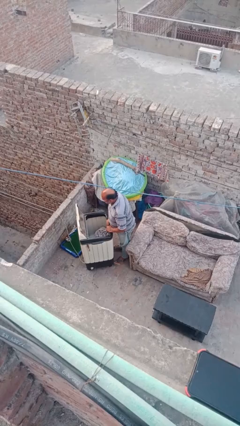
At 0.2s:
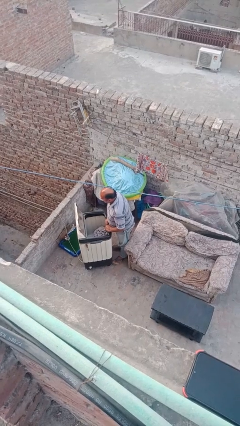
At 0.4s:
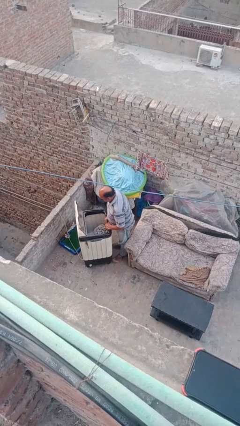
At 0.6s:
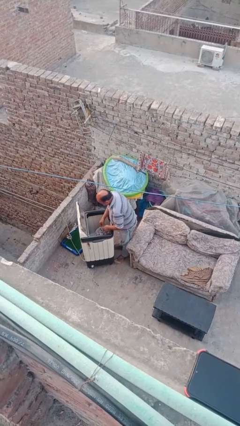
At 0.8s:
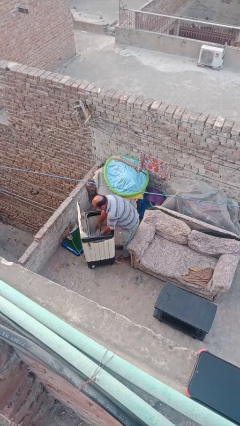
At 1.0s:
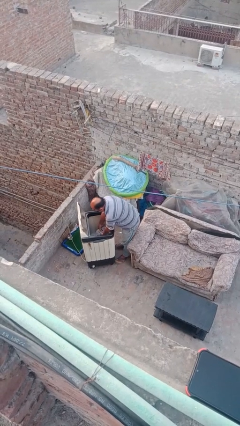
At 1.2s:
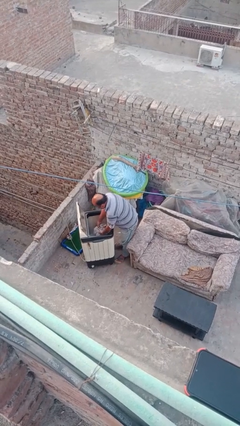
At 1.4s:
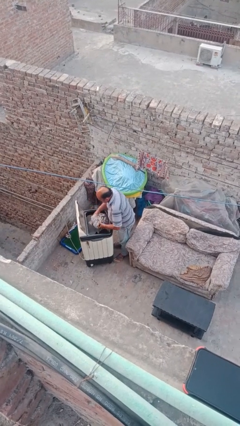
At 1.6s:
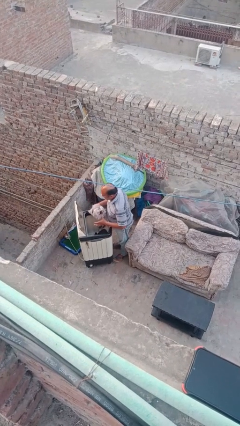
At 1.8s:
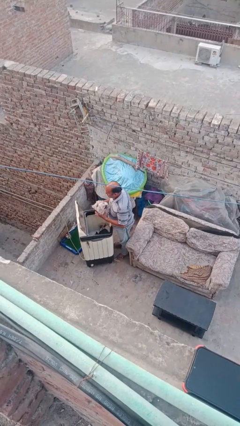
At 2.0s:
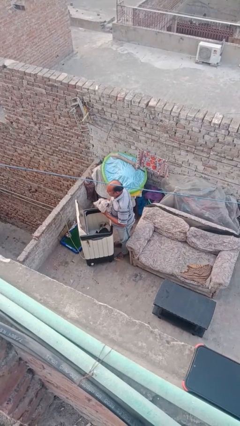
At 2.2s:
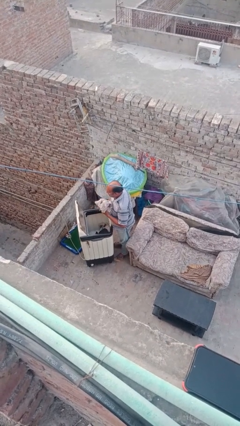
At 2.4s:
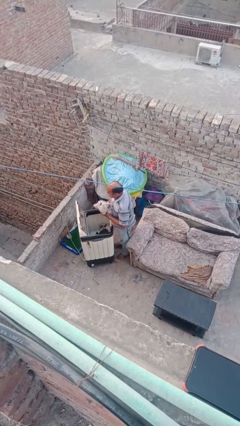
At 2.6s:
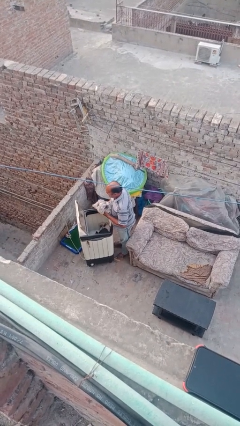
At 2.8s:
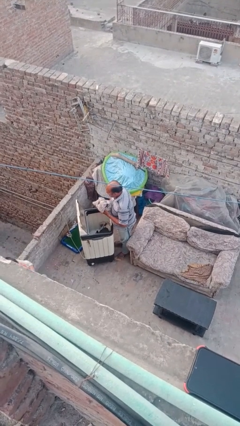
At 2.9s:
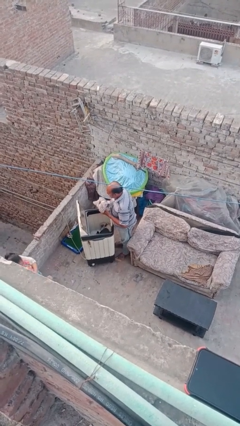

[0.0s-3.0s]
person unloads clotheswasher

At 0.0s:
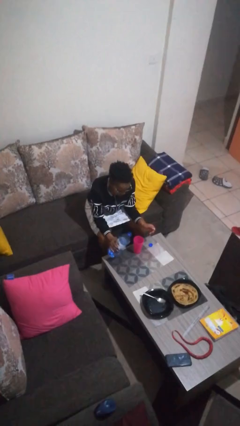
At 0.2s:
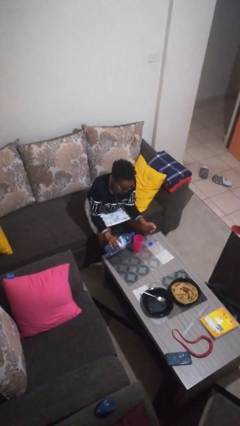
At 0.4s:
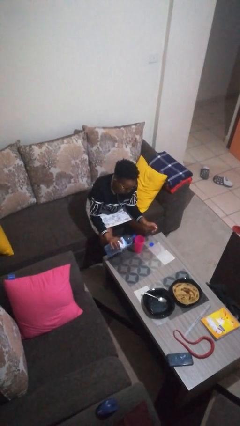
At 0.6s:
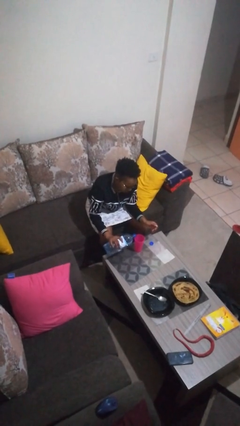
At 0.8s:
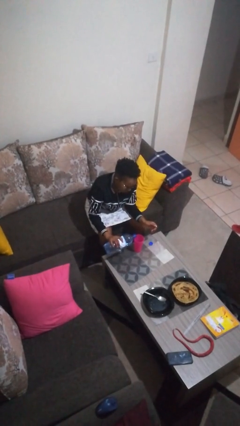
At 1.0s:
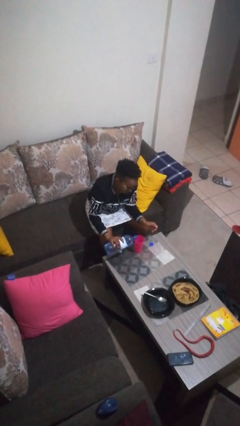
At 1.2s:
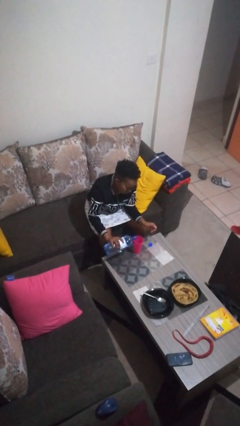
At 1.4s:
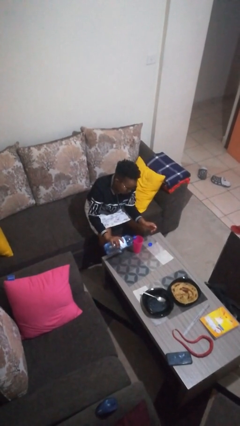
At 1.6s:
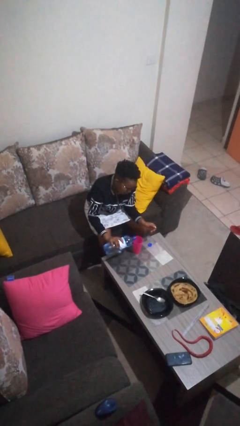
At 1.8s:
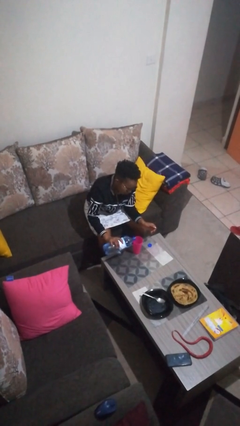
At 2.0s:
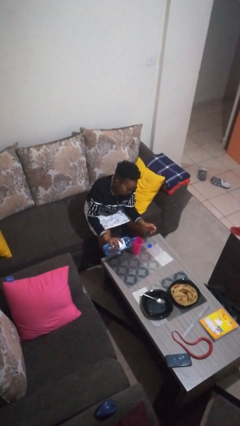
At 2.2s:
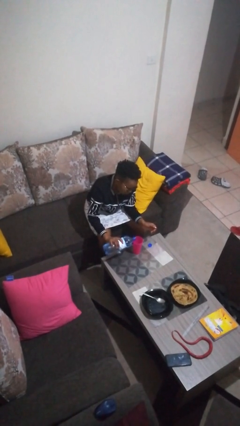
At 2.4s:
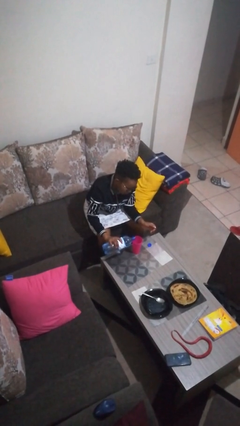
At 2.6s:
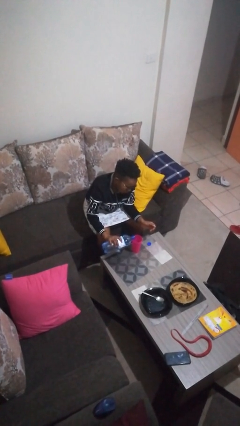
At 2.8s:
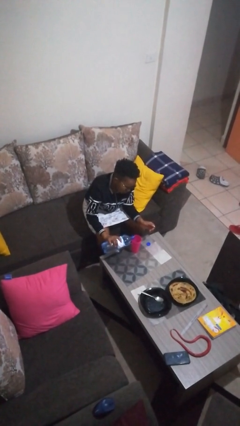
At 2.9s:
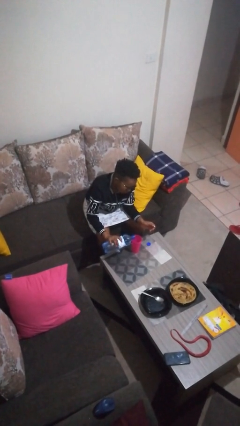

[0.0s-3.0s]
person pours liquid into cup

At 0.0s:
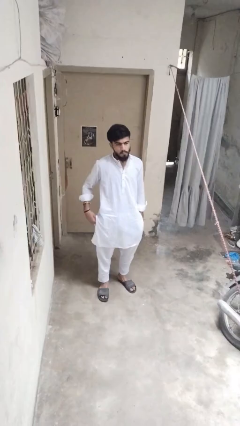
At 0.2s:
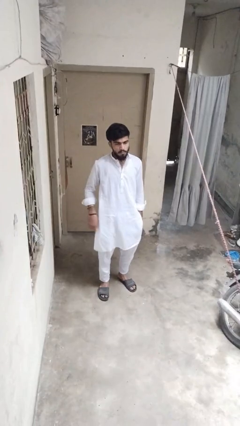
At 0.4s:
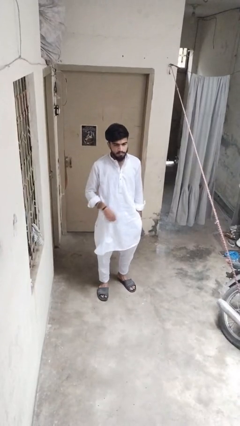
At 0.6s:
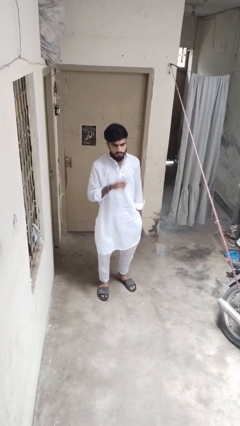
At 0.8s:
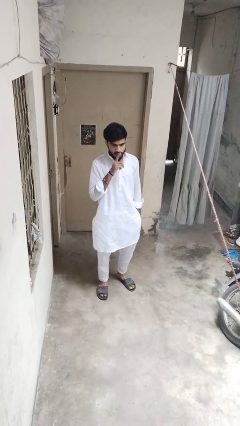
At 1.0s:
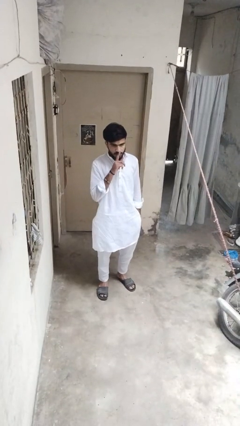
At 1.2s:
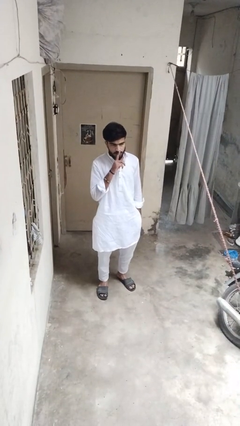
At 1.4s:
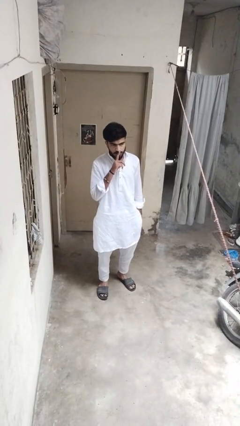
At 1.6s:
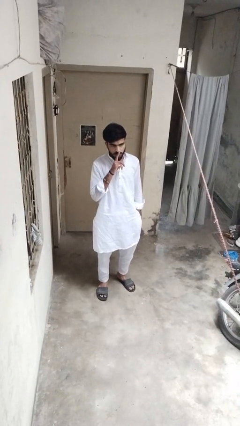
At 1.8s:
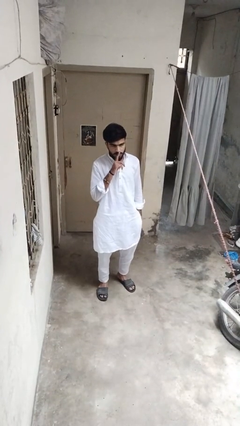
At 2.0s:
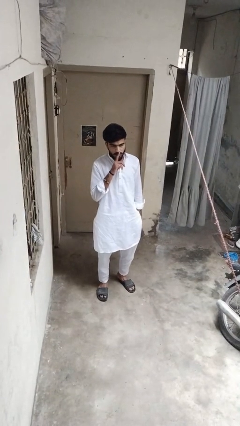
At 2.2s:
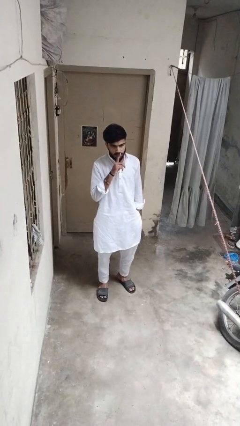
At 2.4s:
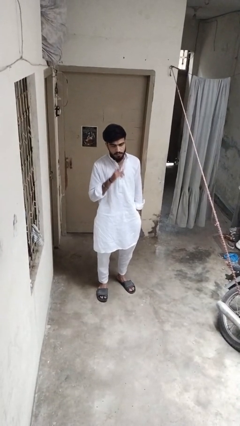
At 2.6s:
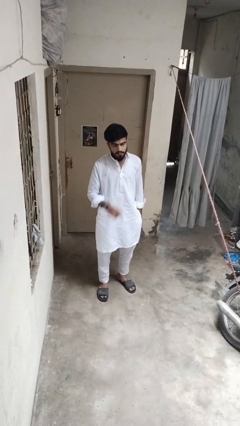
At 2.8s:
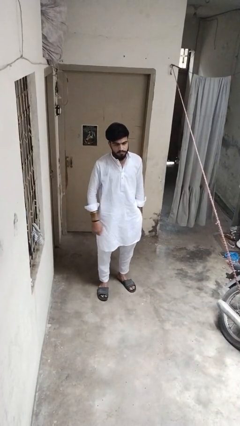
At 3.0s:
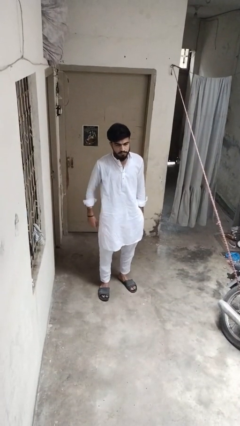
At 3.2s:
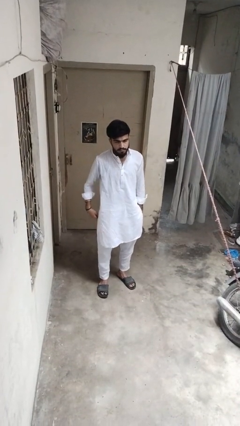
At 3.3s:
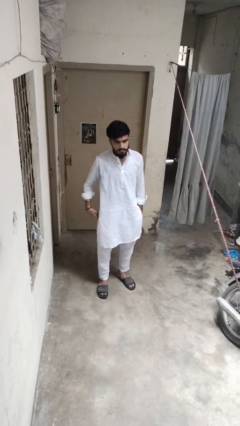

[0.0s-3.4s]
person gestures be quiet

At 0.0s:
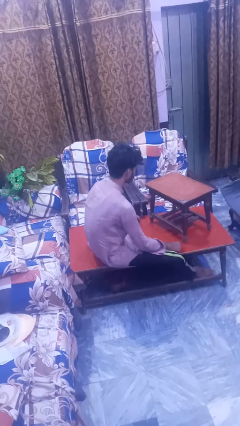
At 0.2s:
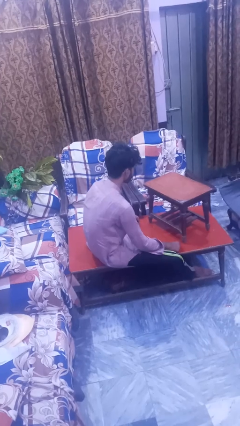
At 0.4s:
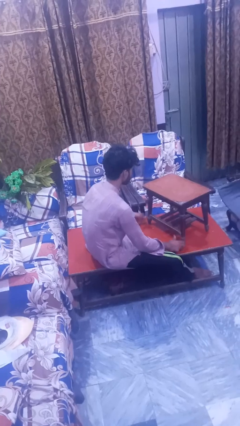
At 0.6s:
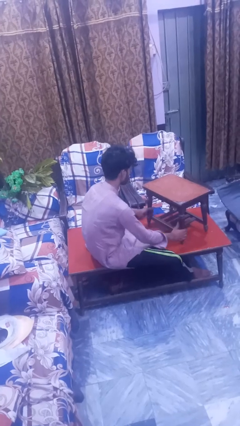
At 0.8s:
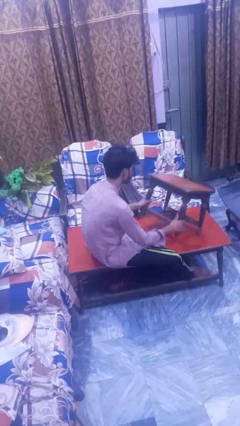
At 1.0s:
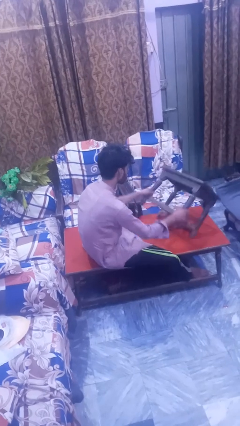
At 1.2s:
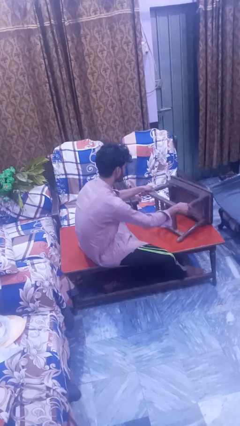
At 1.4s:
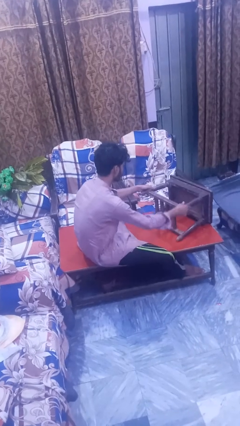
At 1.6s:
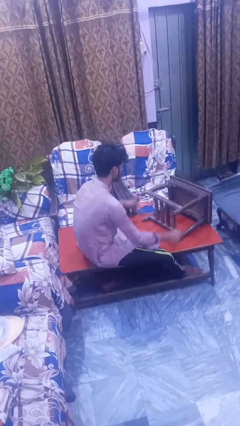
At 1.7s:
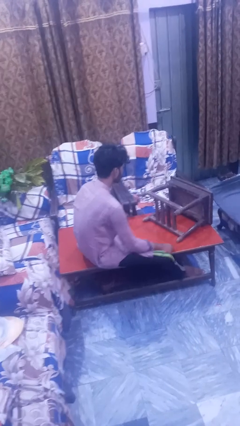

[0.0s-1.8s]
person knocks over furniture

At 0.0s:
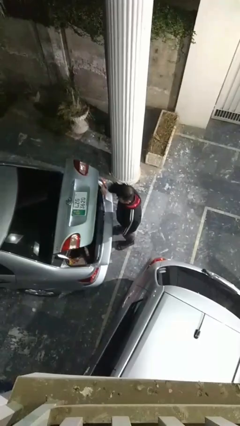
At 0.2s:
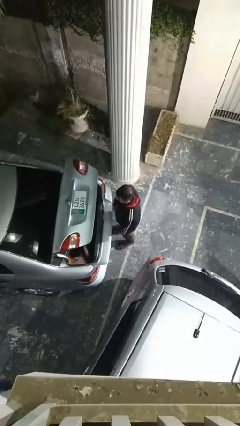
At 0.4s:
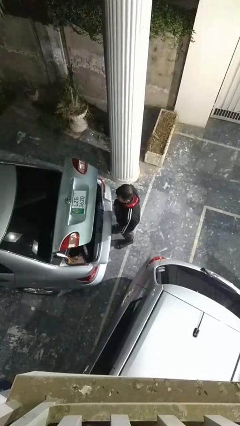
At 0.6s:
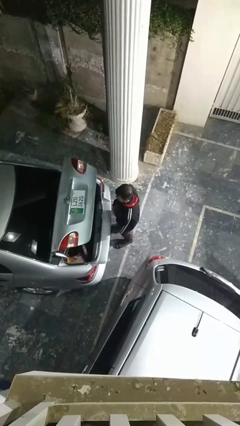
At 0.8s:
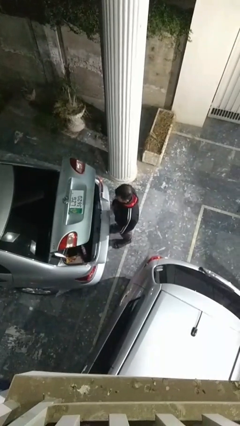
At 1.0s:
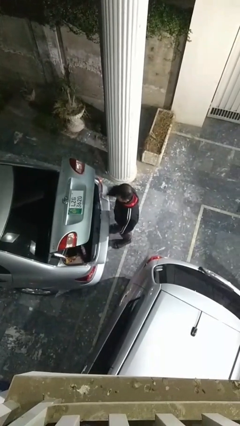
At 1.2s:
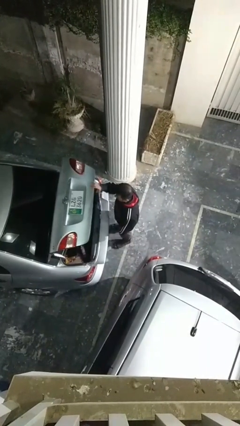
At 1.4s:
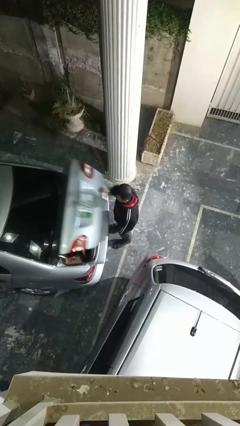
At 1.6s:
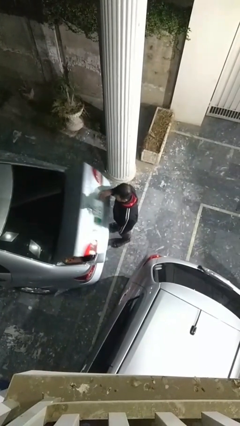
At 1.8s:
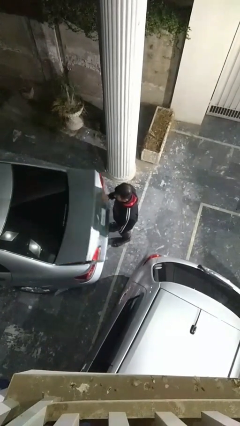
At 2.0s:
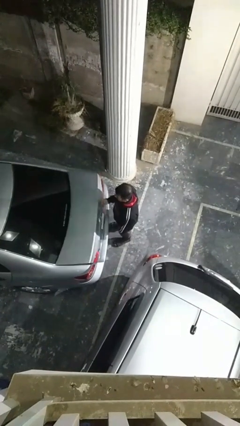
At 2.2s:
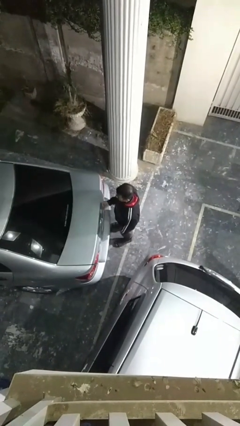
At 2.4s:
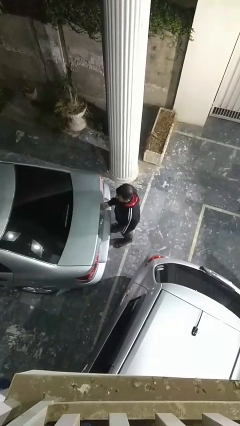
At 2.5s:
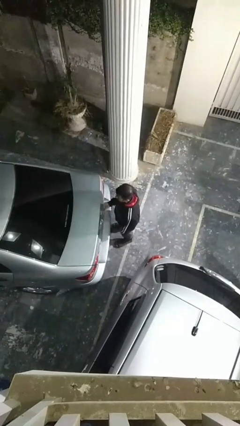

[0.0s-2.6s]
person closes car trunk

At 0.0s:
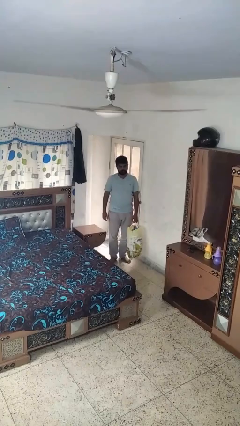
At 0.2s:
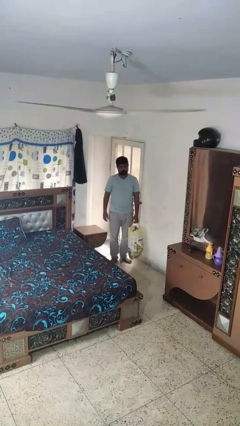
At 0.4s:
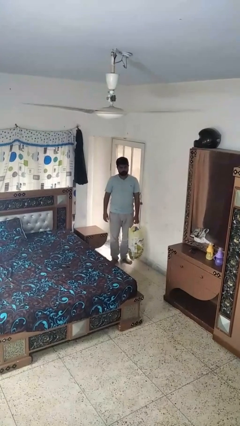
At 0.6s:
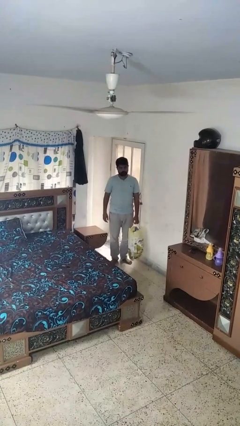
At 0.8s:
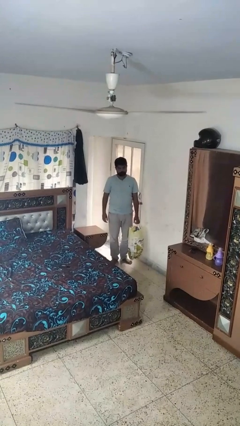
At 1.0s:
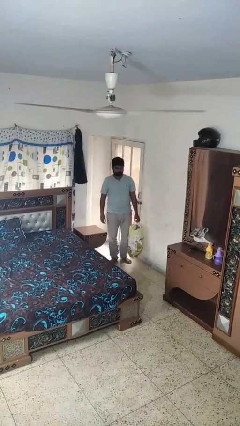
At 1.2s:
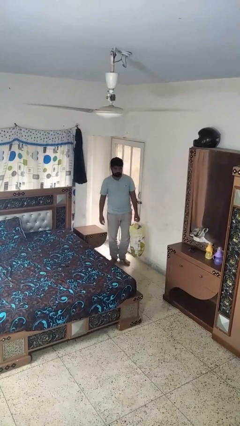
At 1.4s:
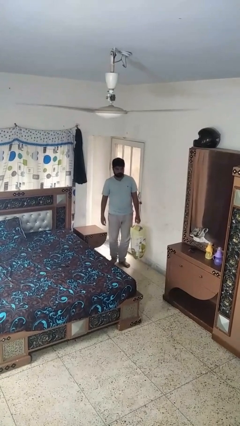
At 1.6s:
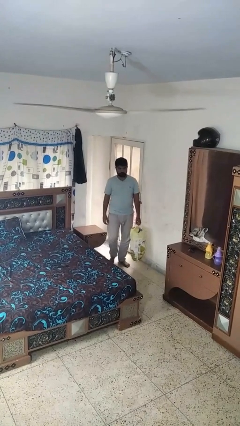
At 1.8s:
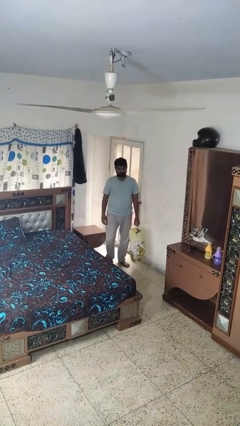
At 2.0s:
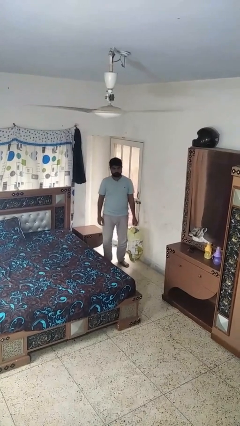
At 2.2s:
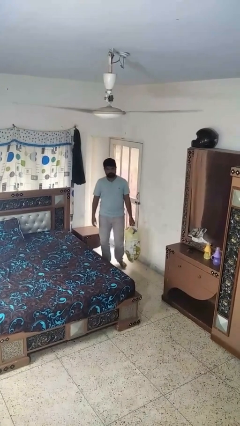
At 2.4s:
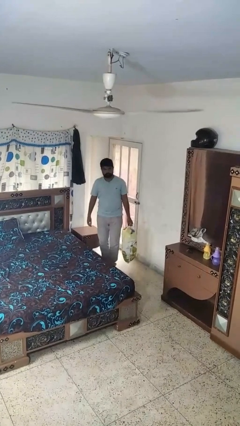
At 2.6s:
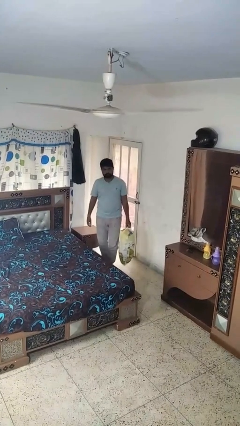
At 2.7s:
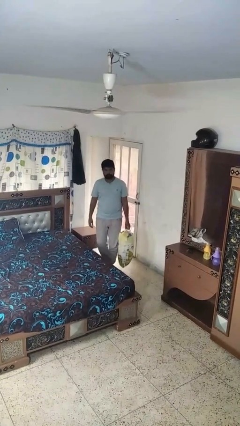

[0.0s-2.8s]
person carries groceries

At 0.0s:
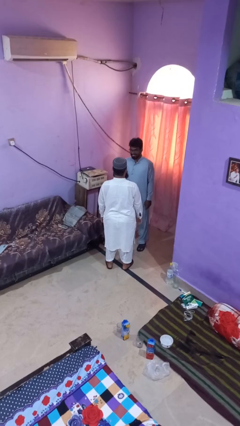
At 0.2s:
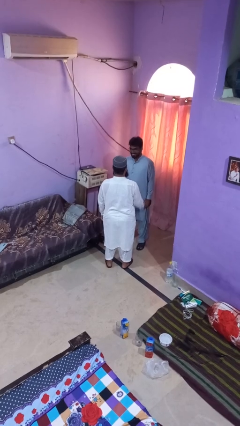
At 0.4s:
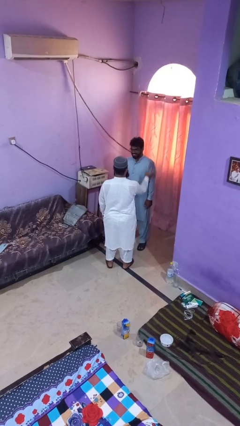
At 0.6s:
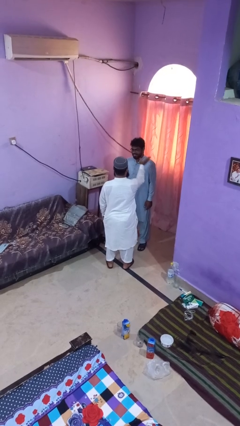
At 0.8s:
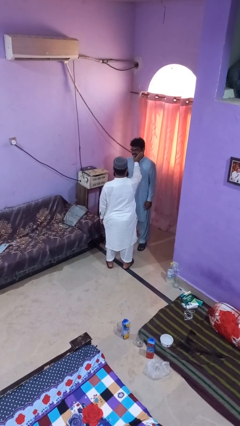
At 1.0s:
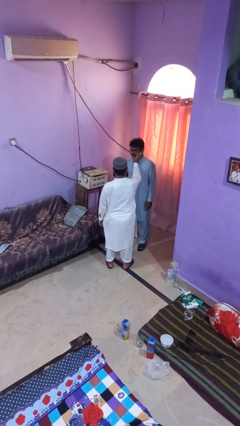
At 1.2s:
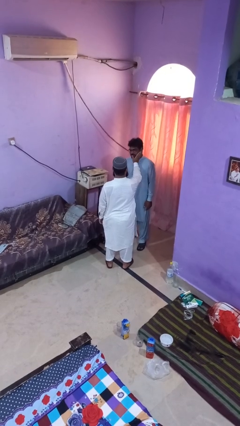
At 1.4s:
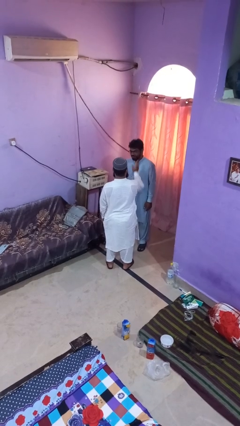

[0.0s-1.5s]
person touches face of person
